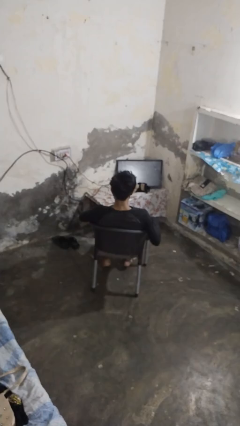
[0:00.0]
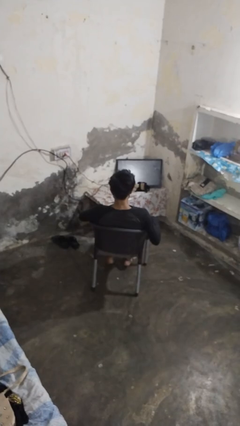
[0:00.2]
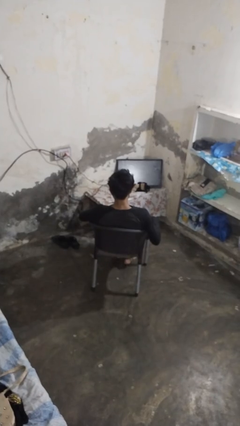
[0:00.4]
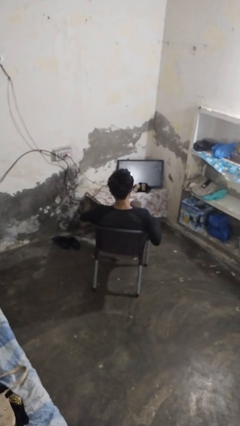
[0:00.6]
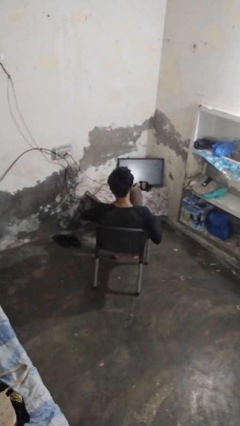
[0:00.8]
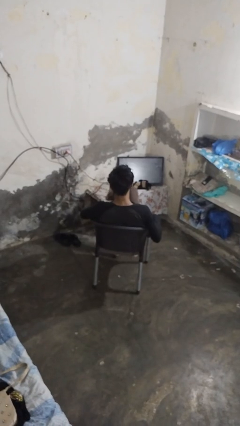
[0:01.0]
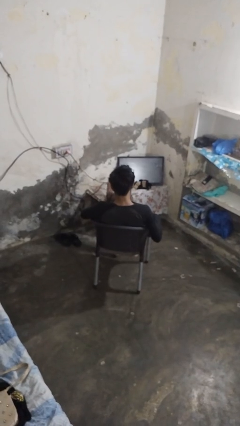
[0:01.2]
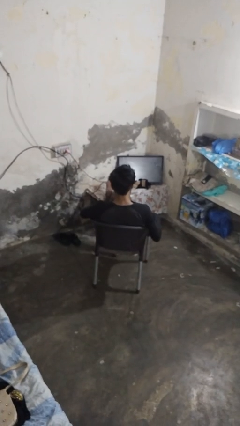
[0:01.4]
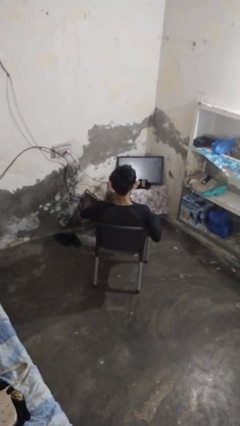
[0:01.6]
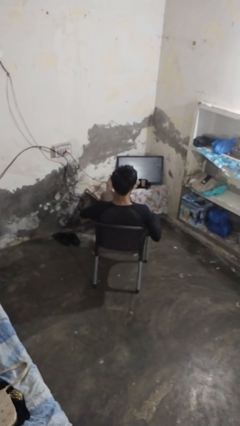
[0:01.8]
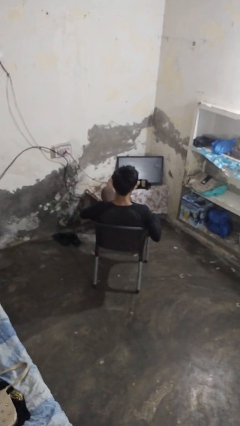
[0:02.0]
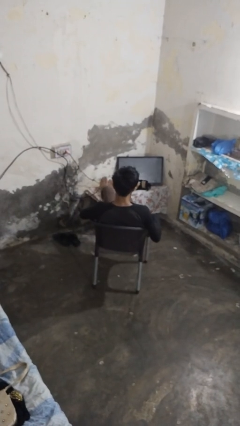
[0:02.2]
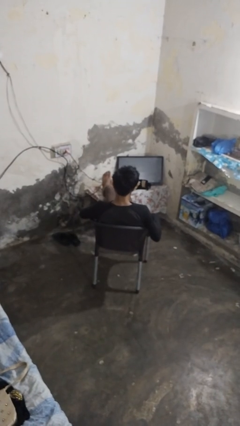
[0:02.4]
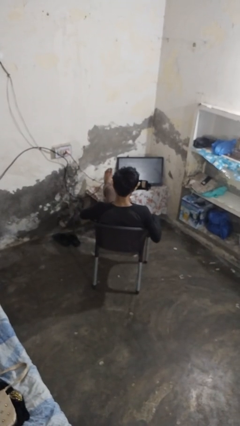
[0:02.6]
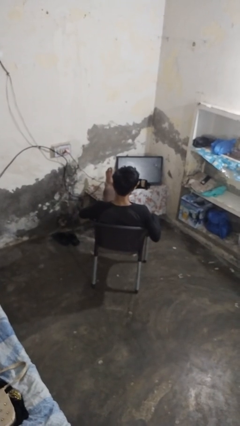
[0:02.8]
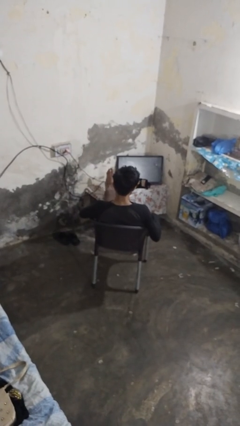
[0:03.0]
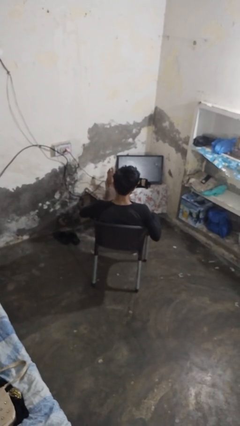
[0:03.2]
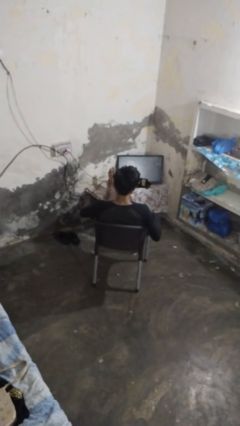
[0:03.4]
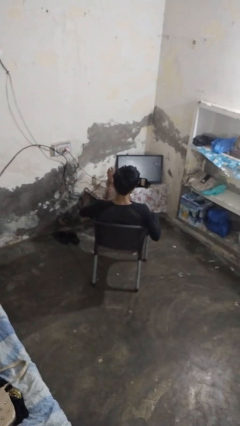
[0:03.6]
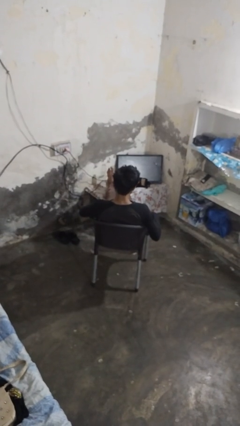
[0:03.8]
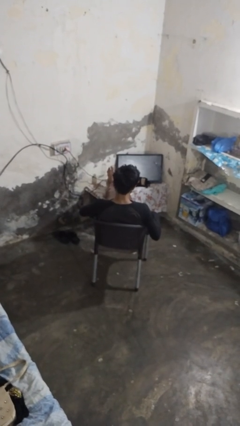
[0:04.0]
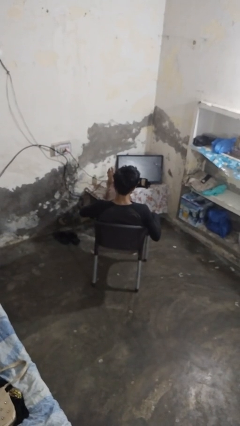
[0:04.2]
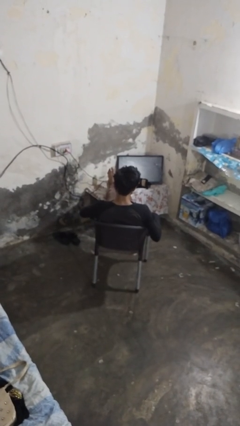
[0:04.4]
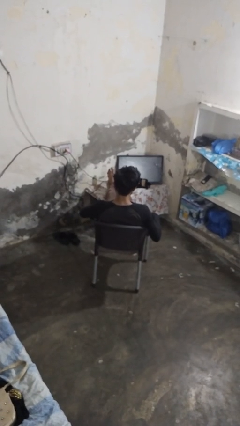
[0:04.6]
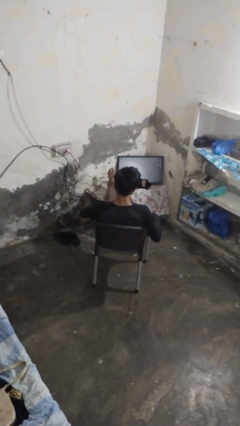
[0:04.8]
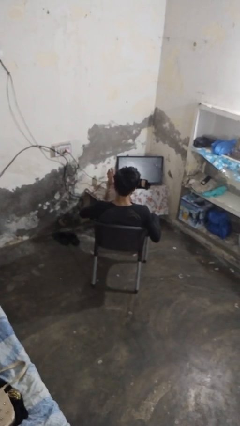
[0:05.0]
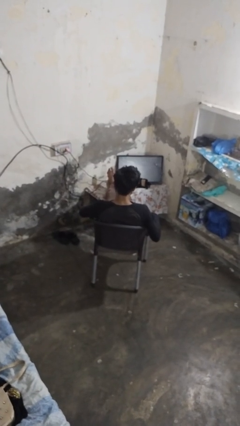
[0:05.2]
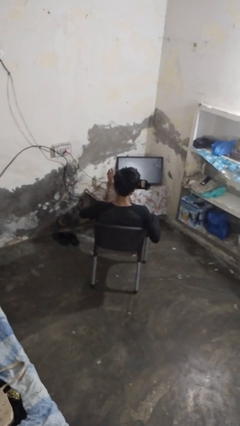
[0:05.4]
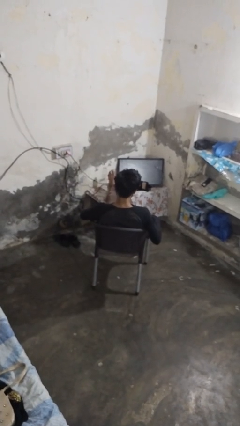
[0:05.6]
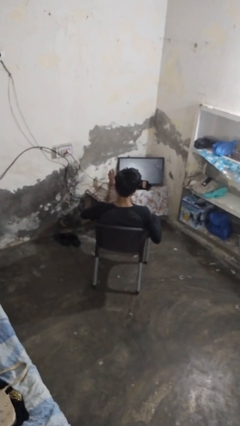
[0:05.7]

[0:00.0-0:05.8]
person puts feet up

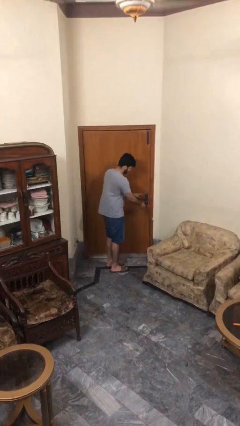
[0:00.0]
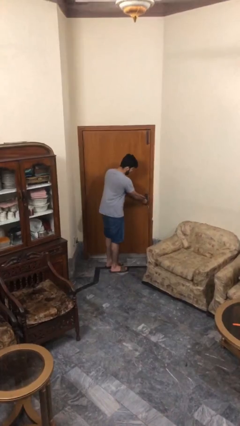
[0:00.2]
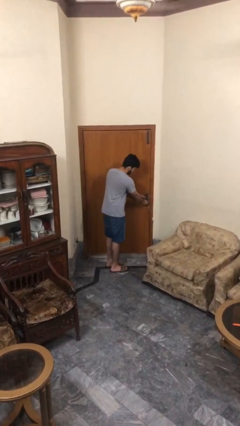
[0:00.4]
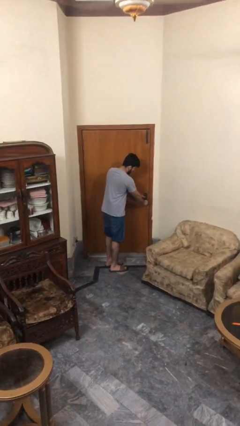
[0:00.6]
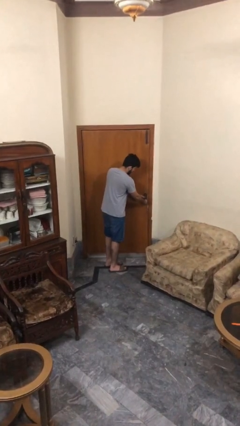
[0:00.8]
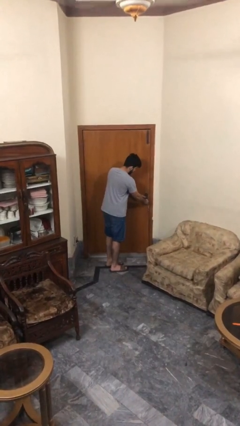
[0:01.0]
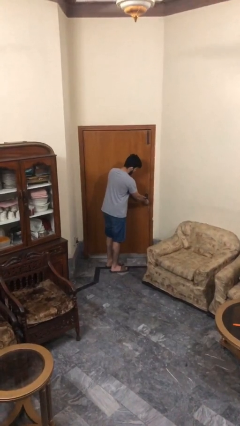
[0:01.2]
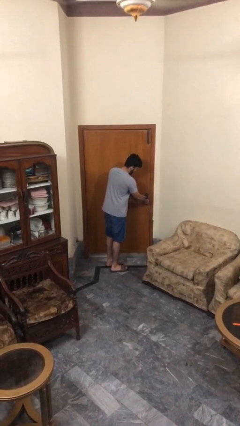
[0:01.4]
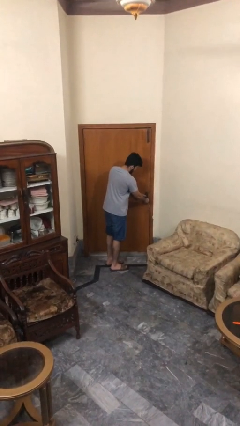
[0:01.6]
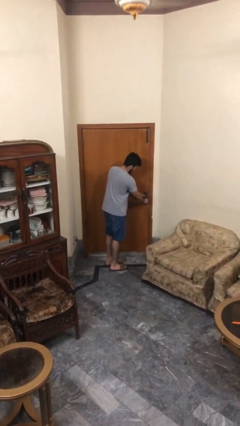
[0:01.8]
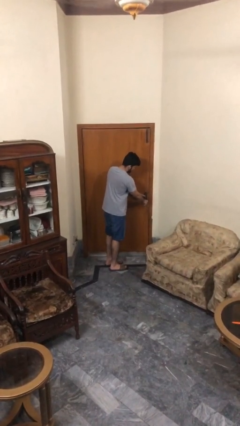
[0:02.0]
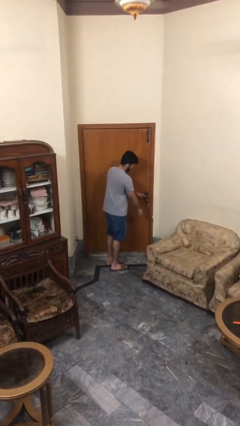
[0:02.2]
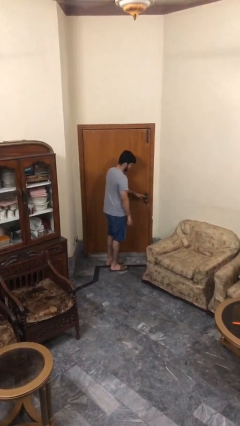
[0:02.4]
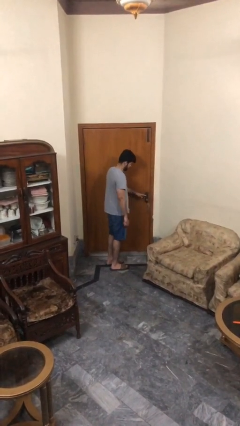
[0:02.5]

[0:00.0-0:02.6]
person unlocks door with keys

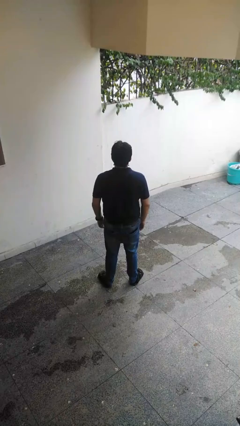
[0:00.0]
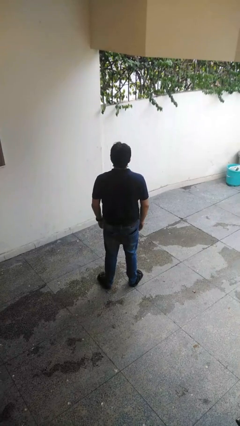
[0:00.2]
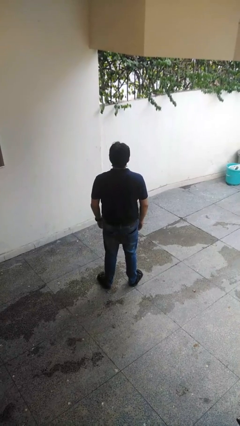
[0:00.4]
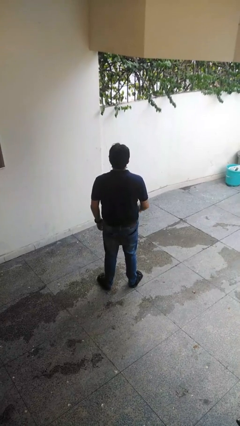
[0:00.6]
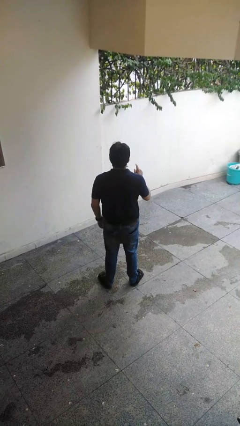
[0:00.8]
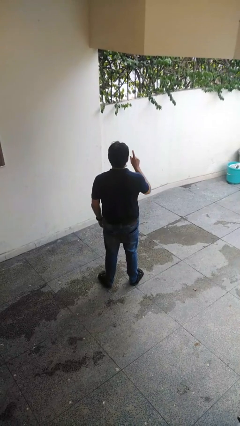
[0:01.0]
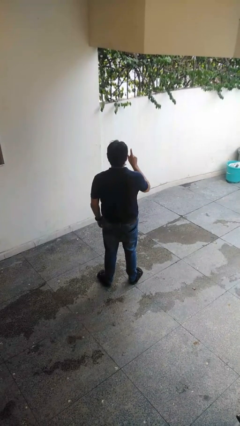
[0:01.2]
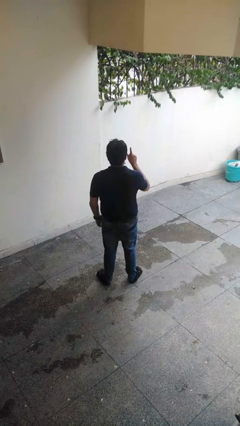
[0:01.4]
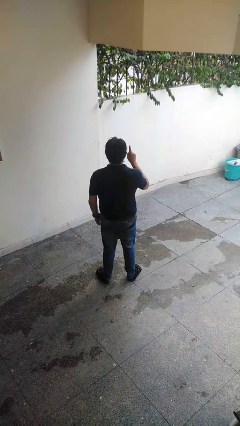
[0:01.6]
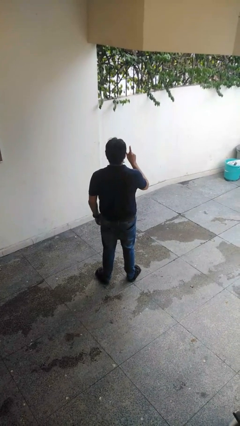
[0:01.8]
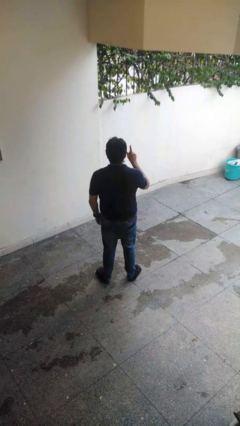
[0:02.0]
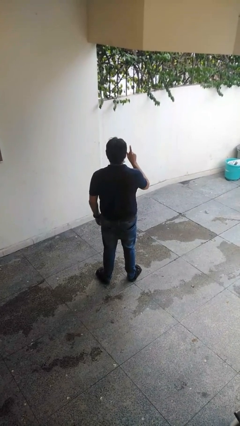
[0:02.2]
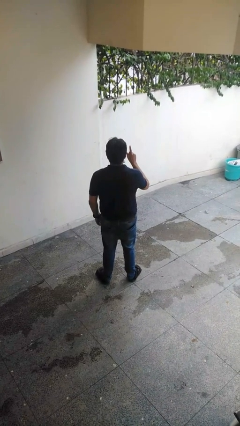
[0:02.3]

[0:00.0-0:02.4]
person gestures number one

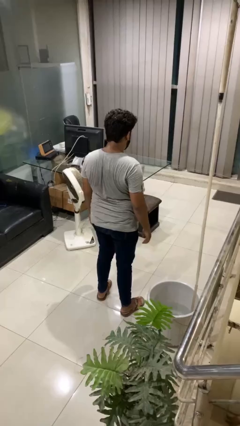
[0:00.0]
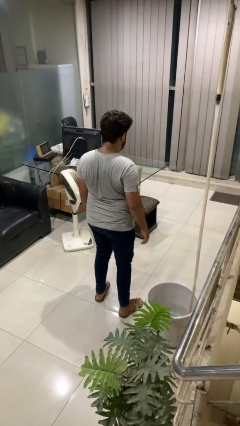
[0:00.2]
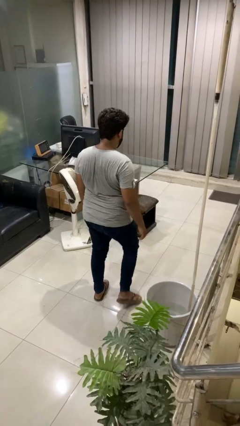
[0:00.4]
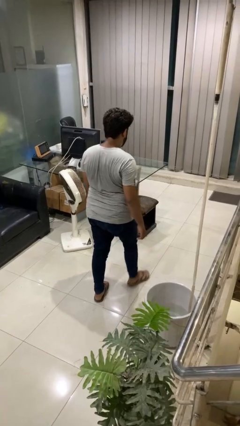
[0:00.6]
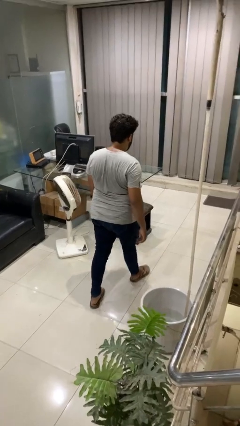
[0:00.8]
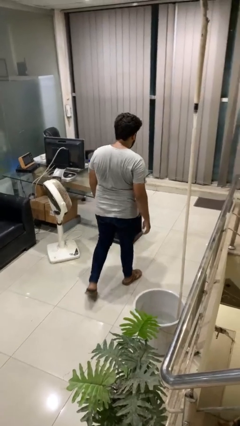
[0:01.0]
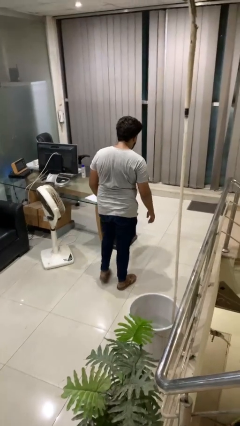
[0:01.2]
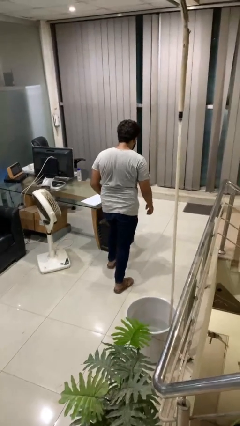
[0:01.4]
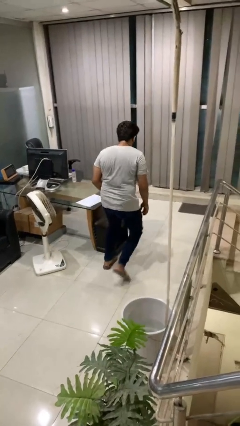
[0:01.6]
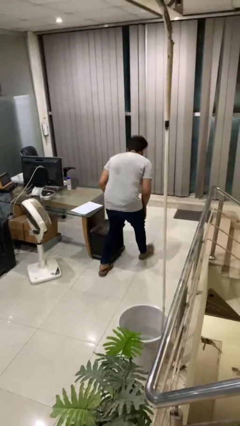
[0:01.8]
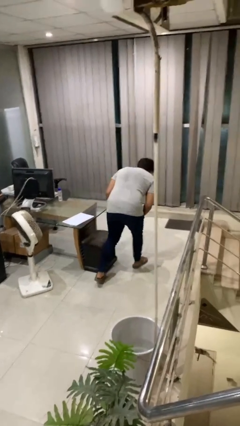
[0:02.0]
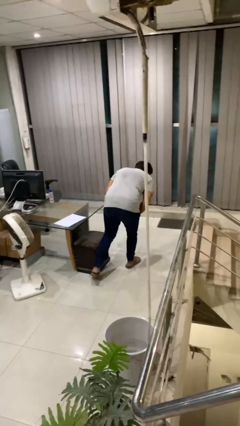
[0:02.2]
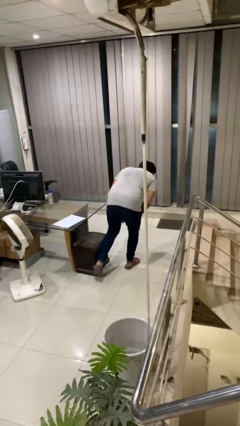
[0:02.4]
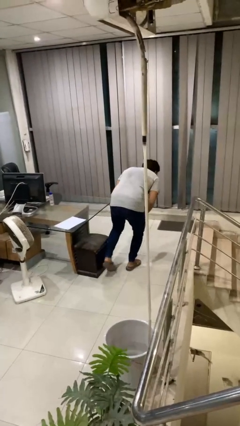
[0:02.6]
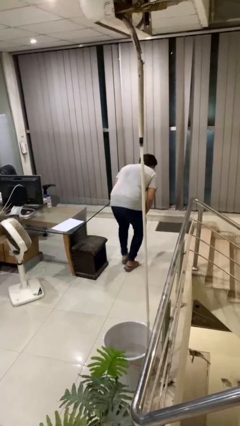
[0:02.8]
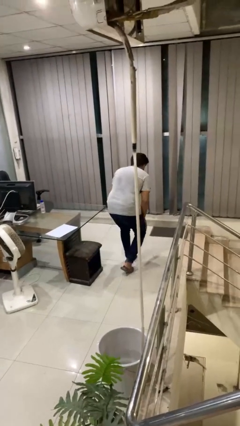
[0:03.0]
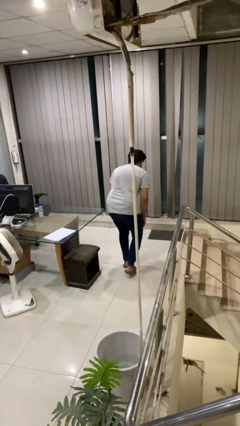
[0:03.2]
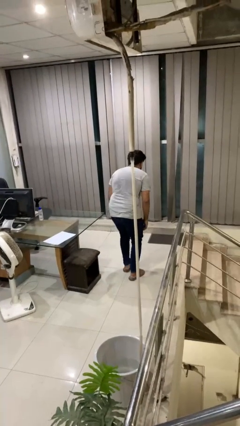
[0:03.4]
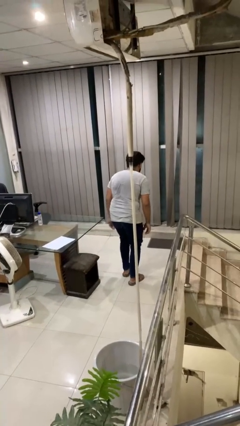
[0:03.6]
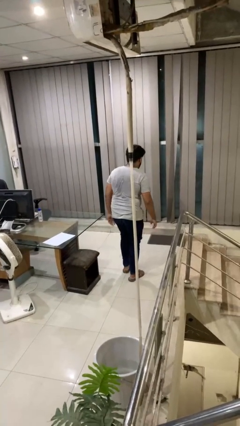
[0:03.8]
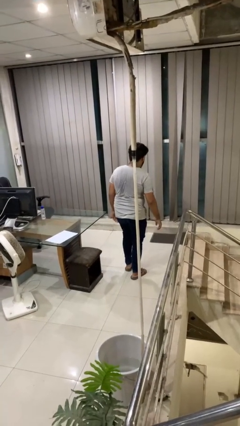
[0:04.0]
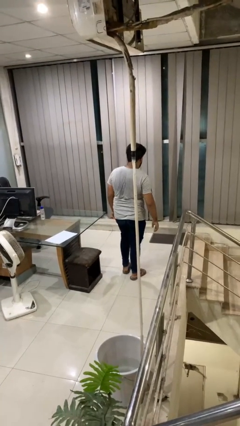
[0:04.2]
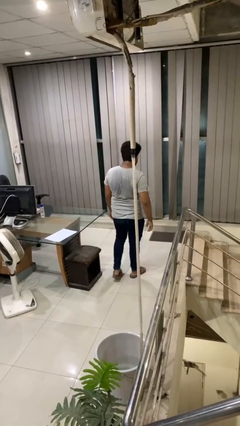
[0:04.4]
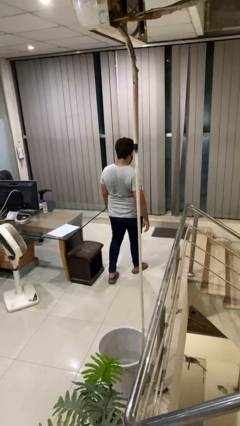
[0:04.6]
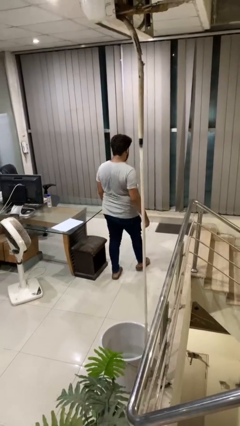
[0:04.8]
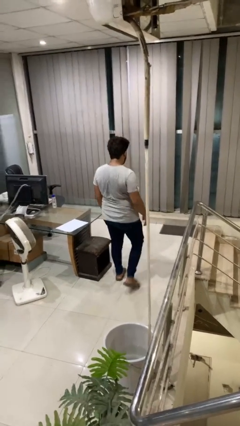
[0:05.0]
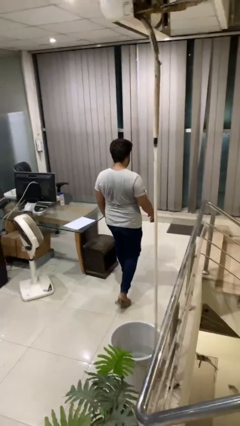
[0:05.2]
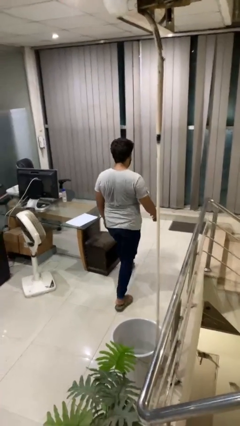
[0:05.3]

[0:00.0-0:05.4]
person bumps into table

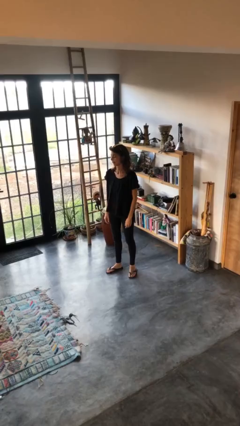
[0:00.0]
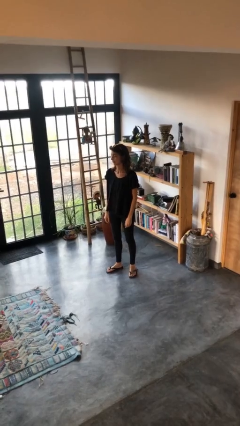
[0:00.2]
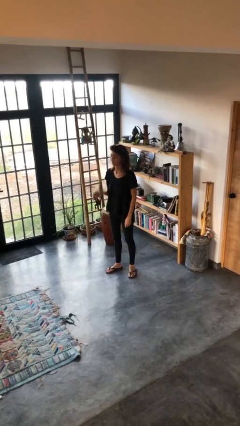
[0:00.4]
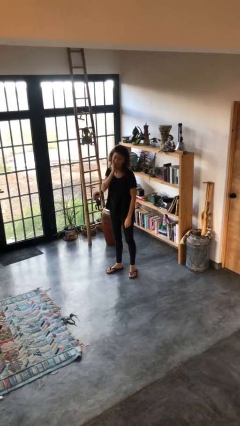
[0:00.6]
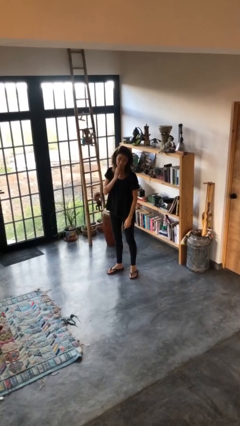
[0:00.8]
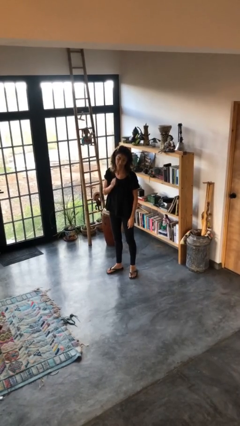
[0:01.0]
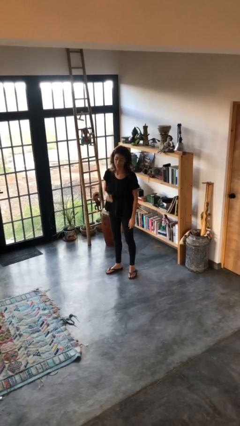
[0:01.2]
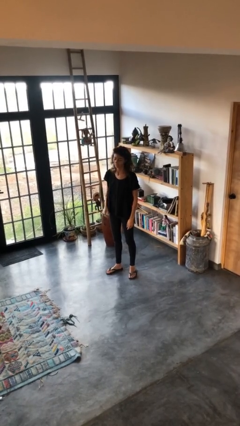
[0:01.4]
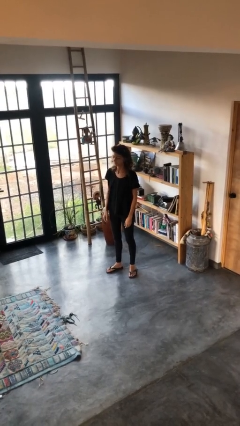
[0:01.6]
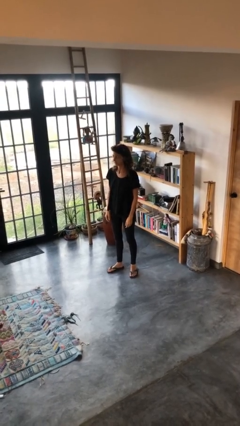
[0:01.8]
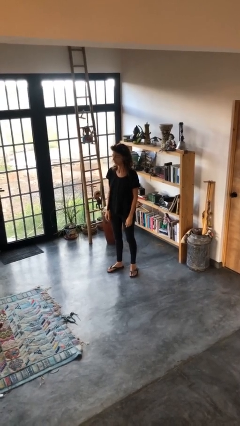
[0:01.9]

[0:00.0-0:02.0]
person swats bug
